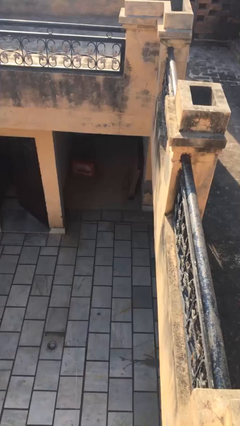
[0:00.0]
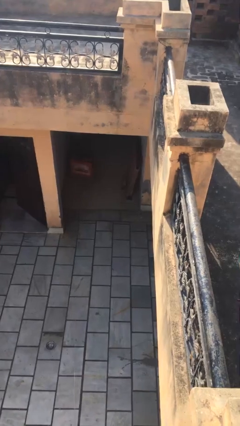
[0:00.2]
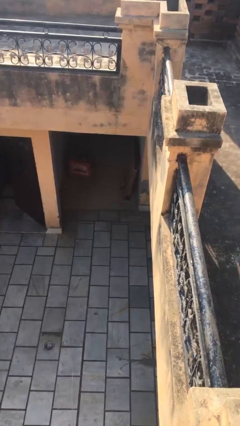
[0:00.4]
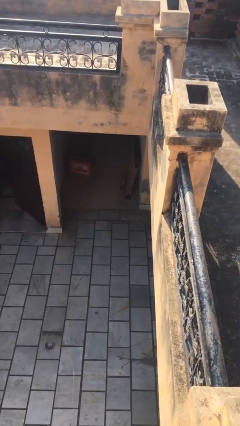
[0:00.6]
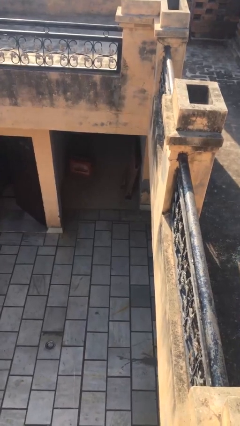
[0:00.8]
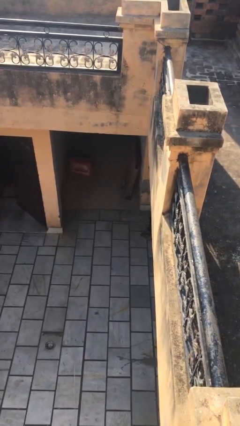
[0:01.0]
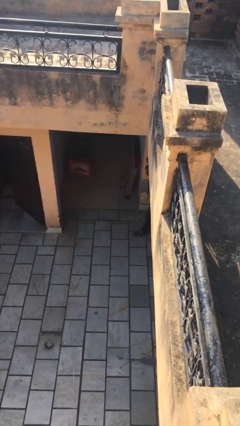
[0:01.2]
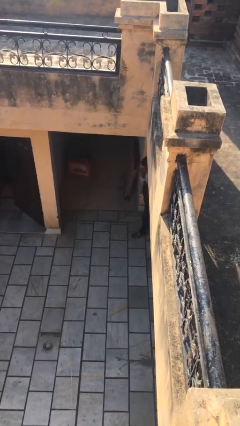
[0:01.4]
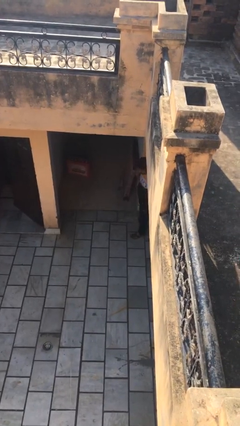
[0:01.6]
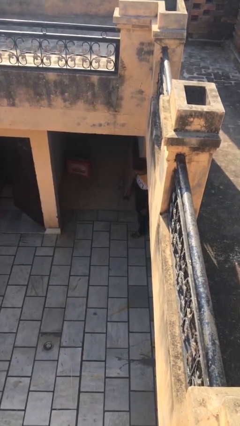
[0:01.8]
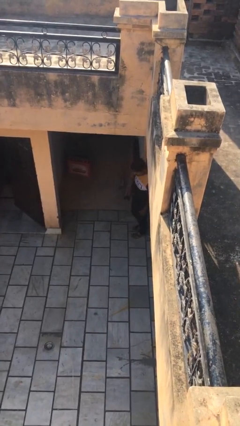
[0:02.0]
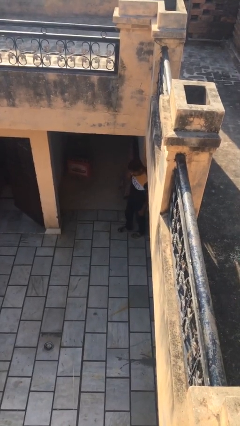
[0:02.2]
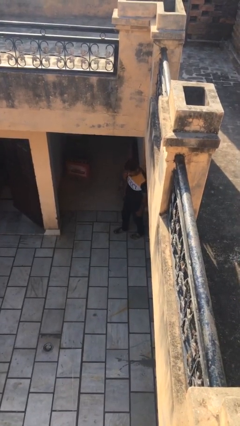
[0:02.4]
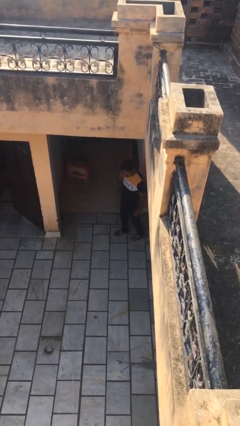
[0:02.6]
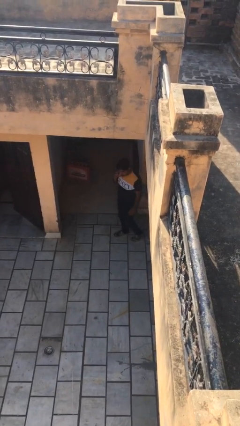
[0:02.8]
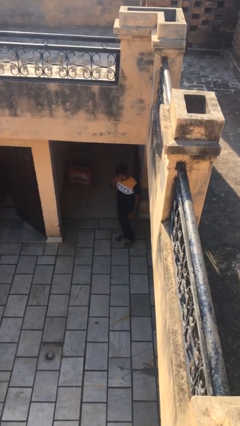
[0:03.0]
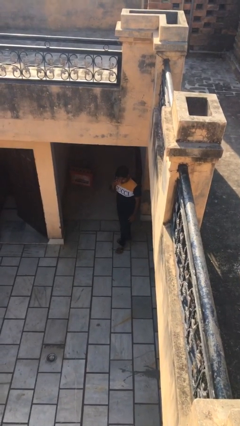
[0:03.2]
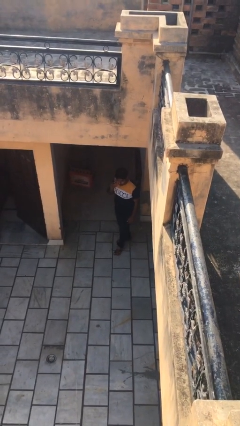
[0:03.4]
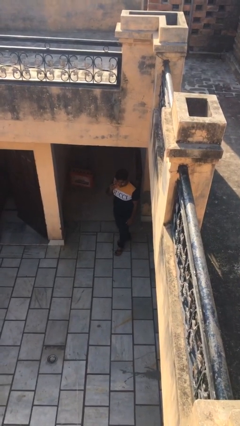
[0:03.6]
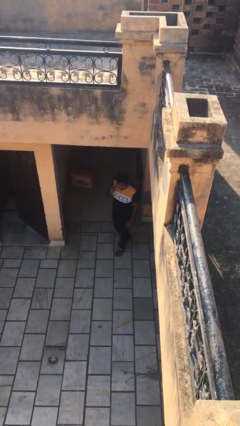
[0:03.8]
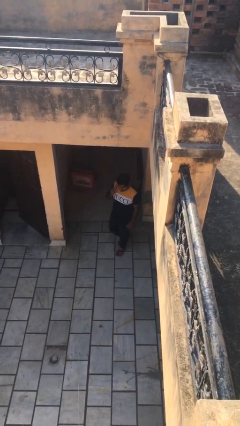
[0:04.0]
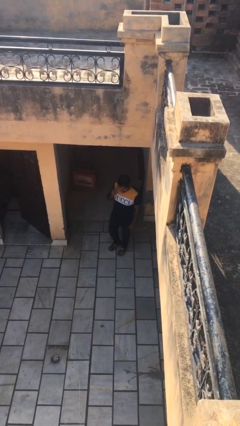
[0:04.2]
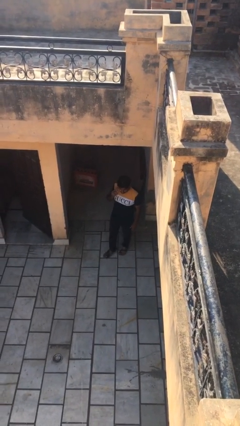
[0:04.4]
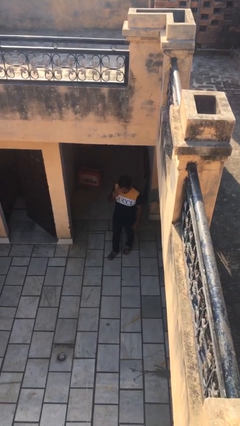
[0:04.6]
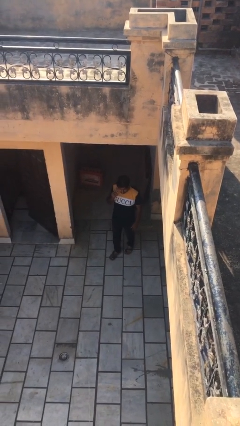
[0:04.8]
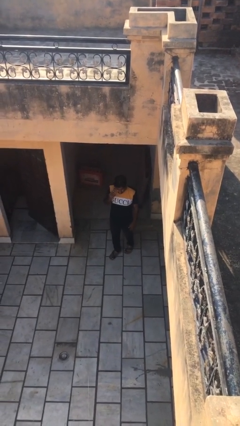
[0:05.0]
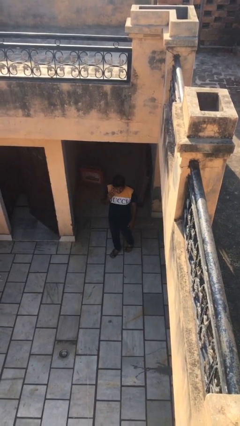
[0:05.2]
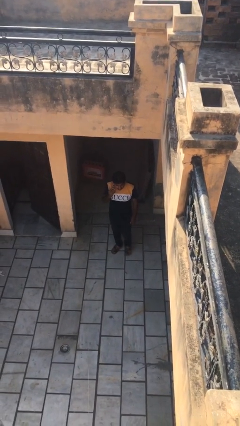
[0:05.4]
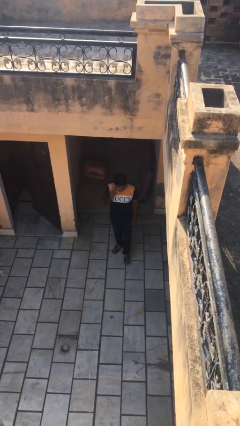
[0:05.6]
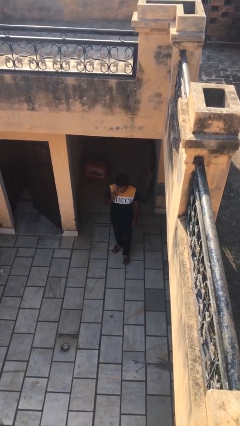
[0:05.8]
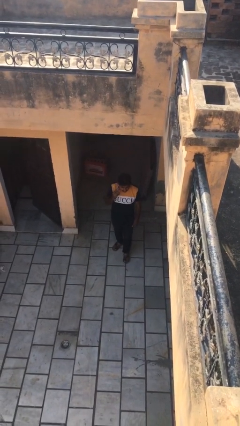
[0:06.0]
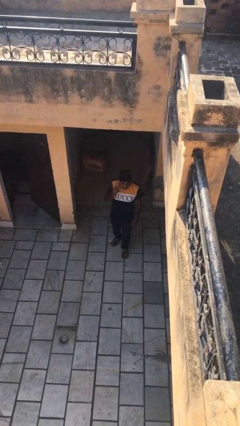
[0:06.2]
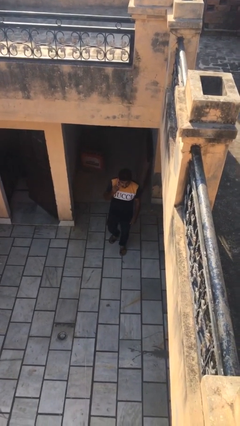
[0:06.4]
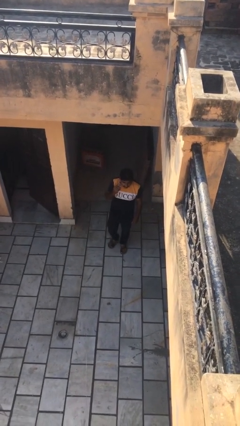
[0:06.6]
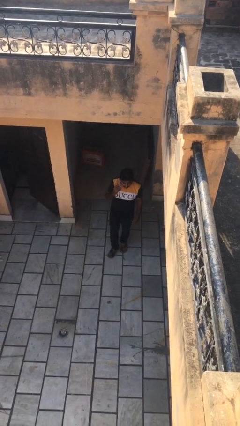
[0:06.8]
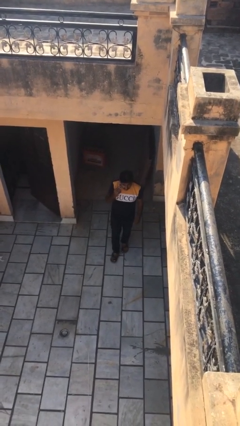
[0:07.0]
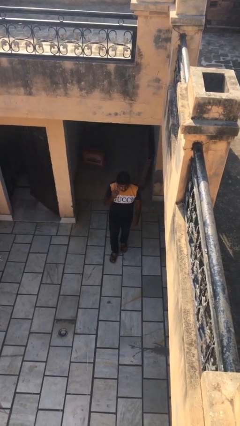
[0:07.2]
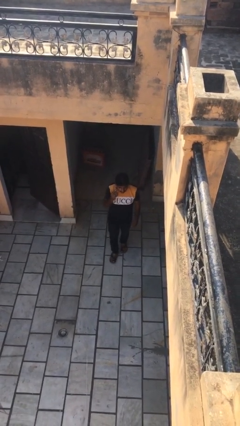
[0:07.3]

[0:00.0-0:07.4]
person enters scene through structure

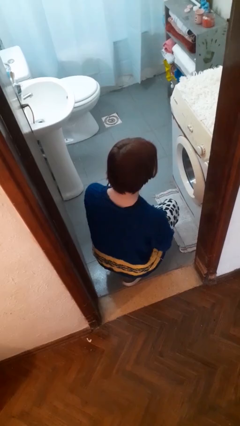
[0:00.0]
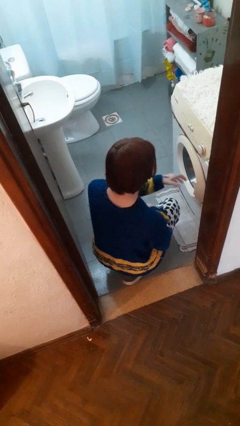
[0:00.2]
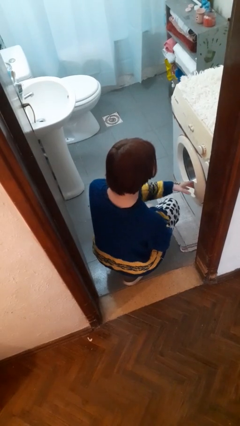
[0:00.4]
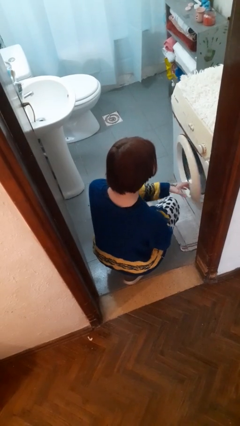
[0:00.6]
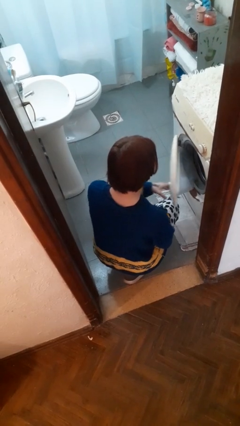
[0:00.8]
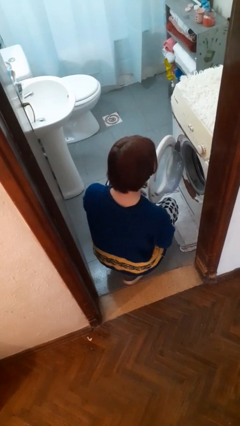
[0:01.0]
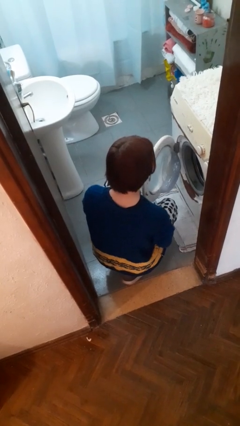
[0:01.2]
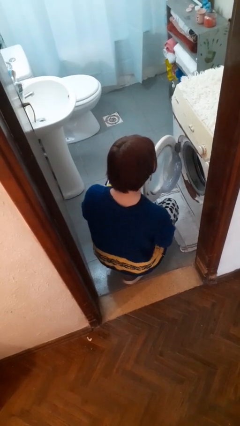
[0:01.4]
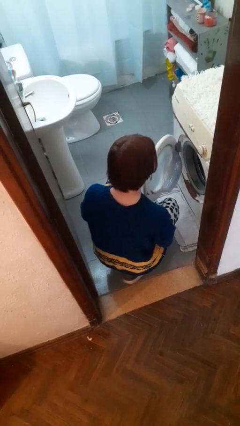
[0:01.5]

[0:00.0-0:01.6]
person opens clothes washer

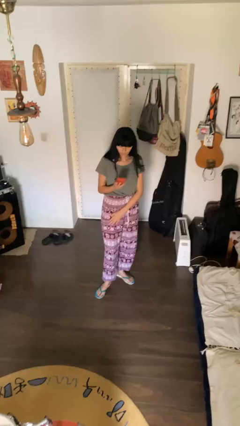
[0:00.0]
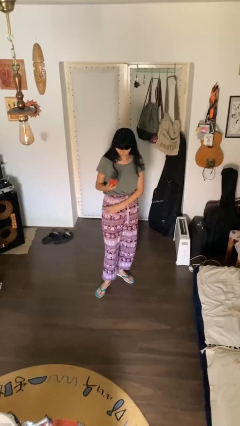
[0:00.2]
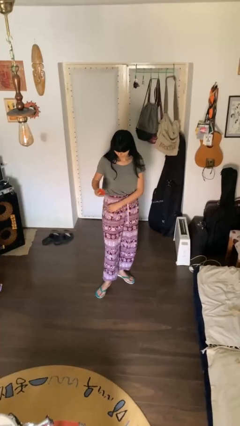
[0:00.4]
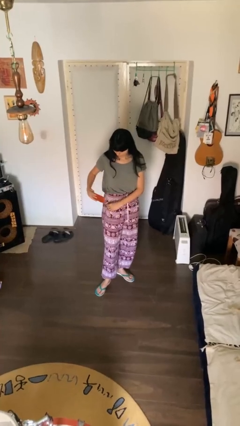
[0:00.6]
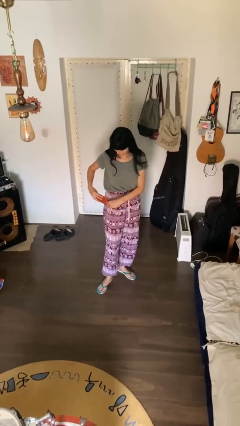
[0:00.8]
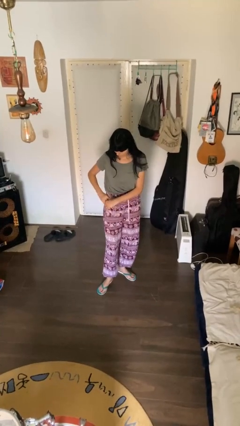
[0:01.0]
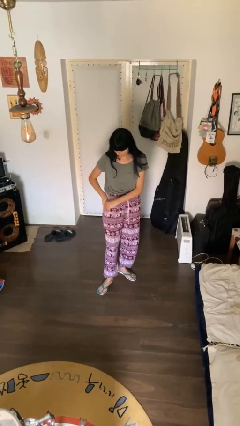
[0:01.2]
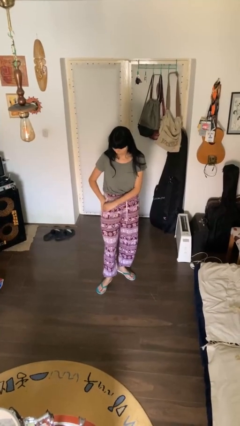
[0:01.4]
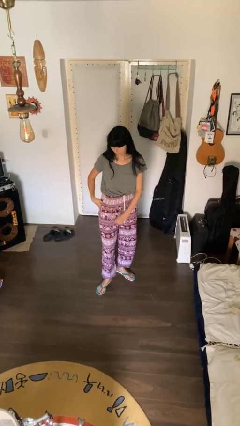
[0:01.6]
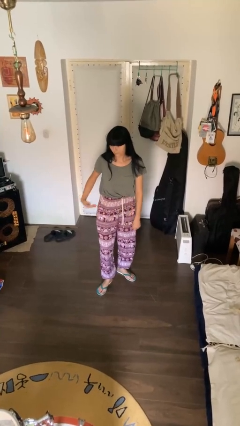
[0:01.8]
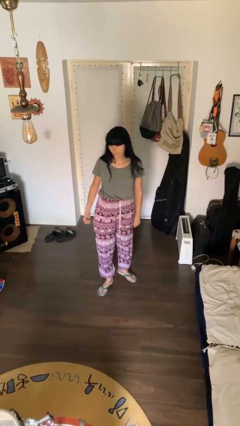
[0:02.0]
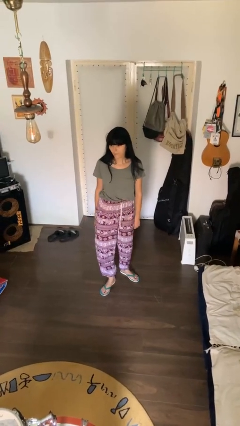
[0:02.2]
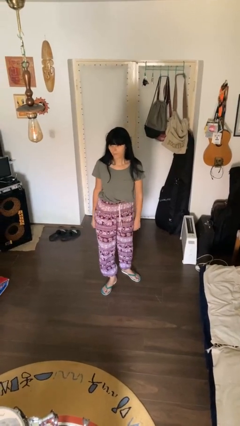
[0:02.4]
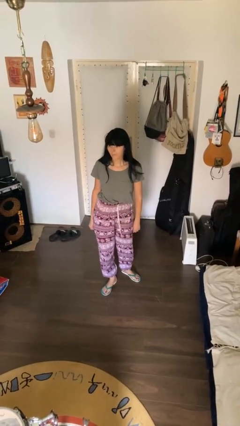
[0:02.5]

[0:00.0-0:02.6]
person puts phone into pocket

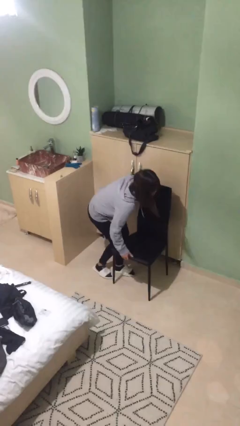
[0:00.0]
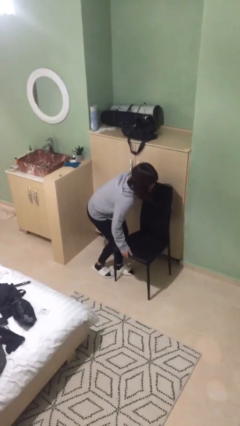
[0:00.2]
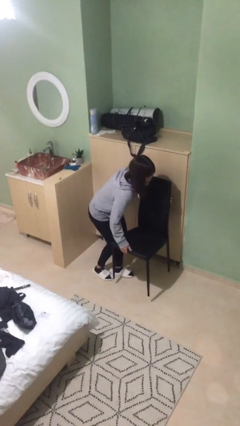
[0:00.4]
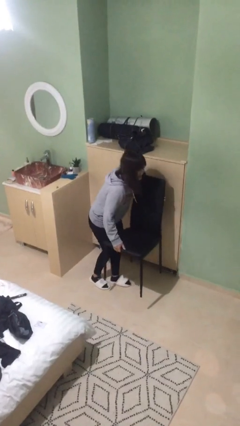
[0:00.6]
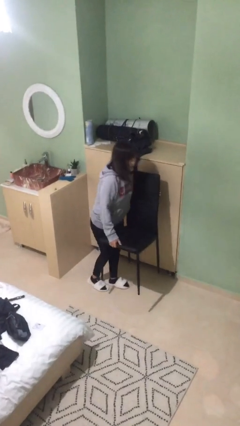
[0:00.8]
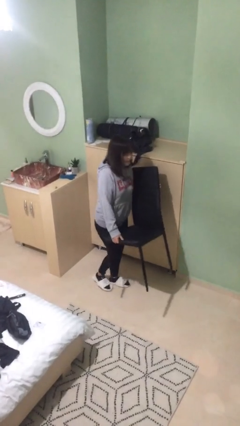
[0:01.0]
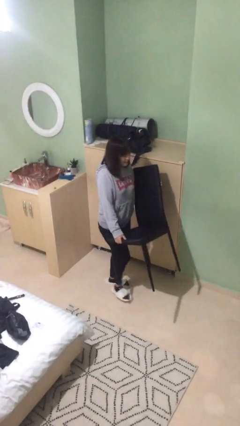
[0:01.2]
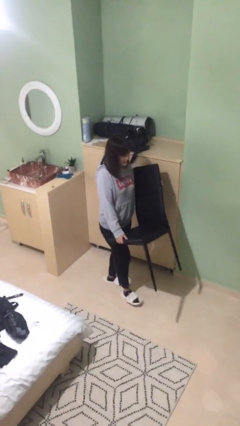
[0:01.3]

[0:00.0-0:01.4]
person picks up object from floor

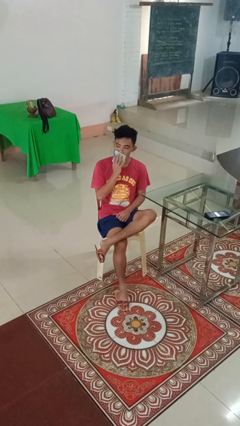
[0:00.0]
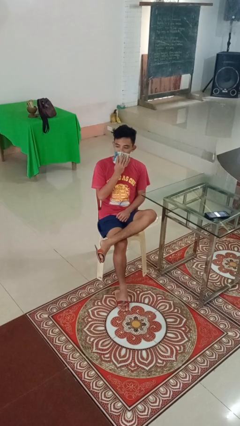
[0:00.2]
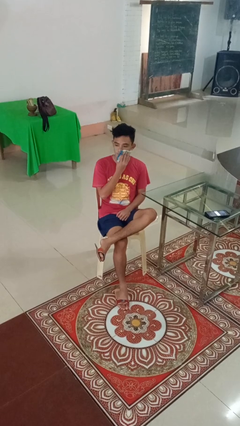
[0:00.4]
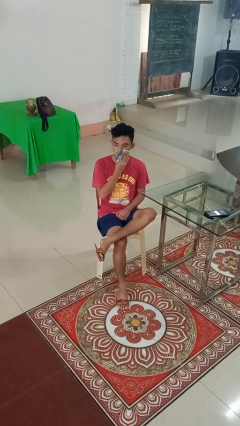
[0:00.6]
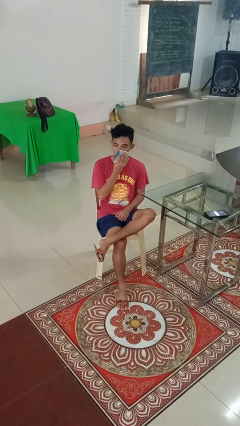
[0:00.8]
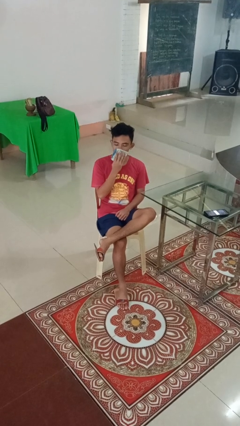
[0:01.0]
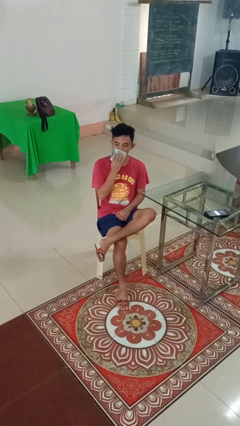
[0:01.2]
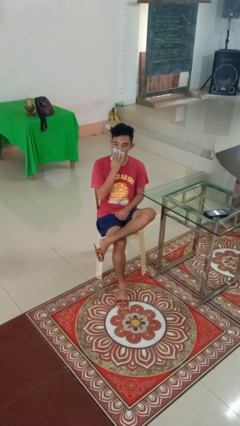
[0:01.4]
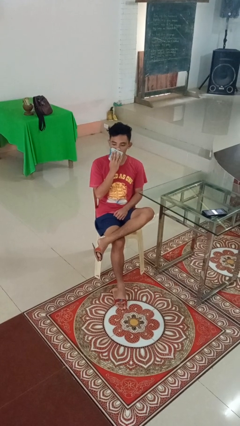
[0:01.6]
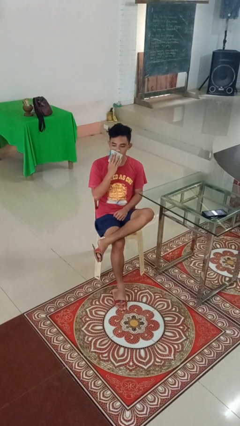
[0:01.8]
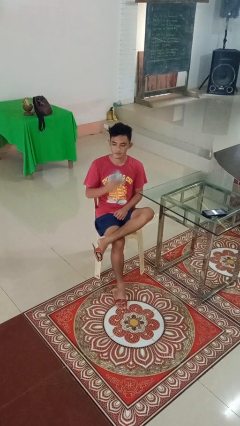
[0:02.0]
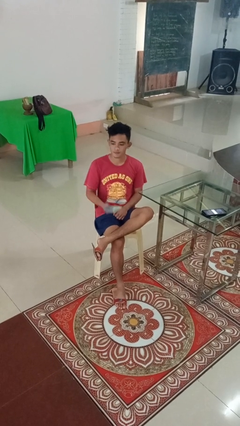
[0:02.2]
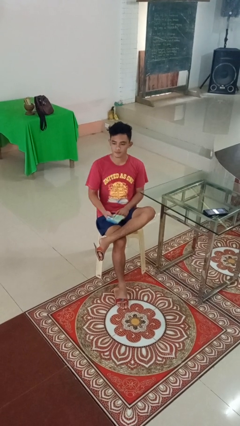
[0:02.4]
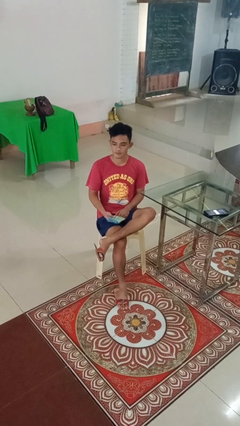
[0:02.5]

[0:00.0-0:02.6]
person wipes mouth with napkin

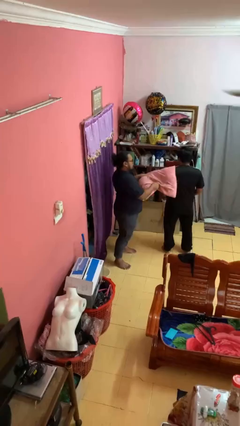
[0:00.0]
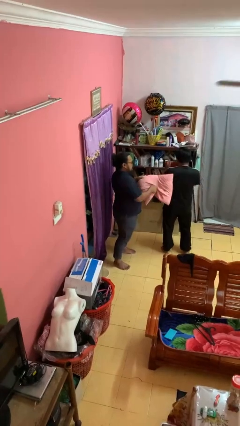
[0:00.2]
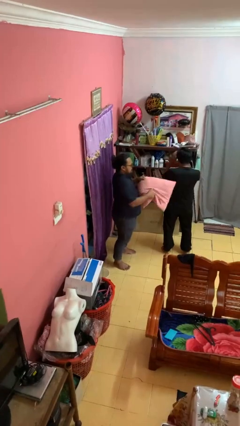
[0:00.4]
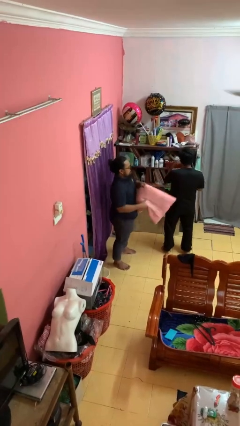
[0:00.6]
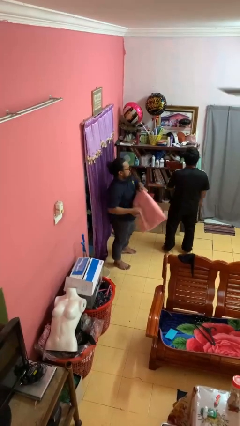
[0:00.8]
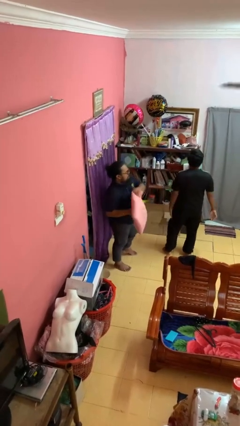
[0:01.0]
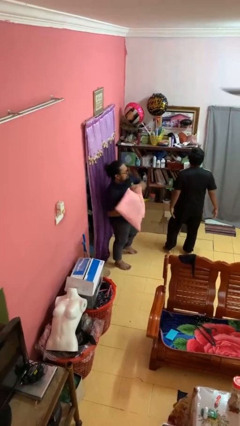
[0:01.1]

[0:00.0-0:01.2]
person hits person with pillow
